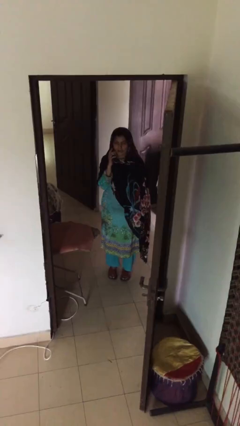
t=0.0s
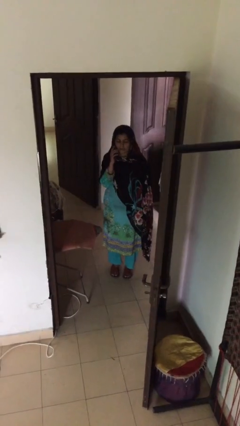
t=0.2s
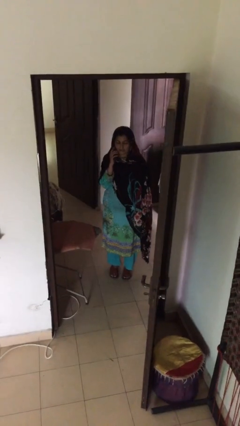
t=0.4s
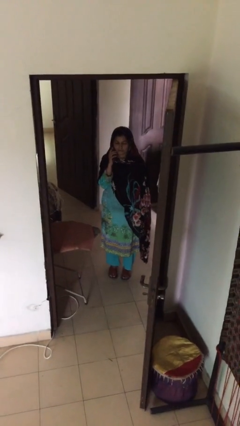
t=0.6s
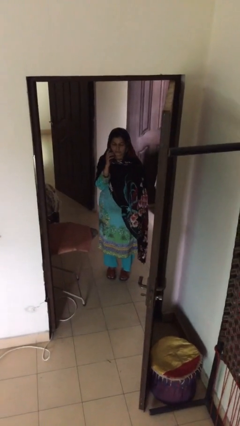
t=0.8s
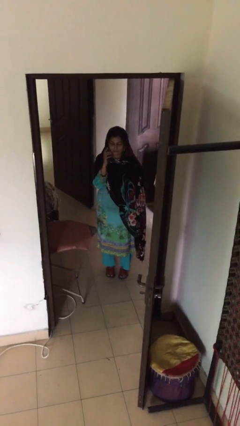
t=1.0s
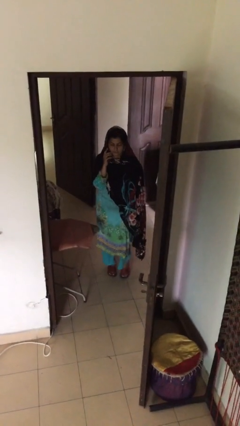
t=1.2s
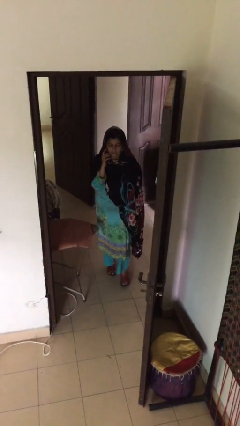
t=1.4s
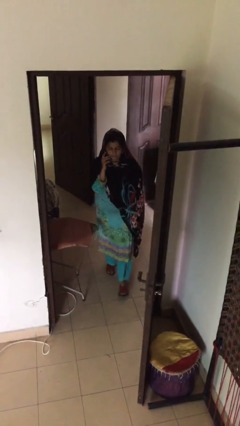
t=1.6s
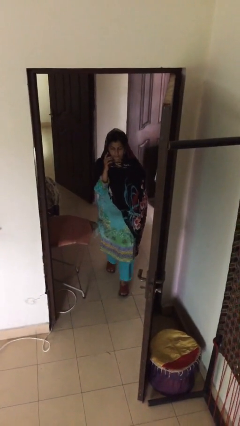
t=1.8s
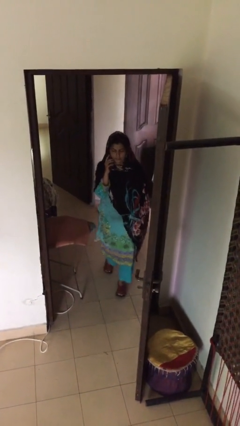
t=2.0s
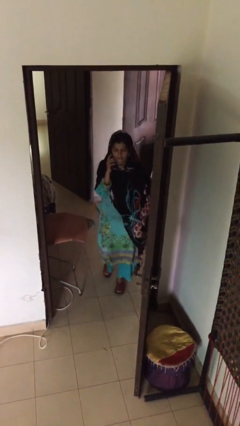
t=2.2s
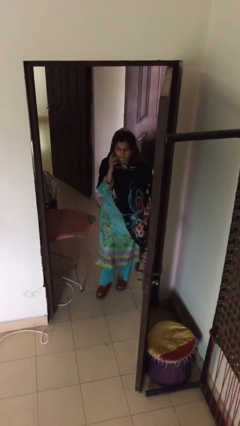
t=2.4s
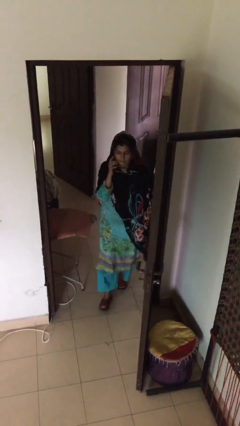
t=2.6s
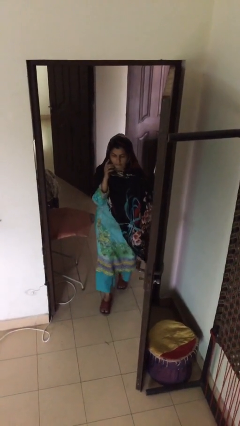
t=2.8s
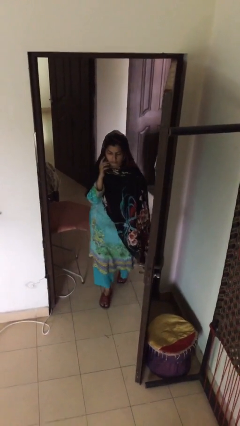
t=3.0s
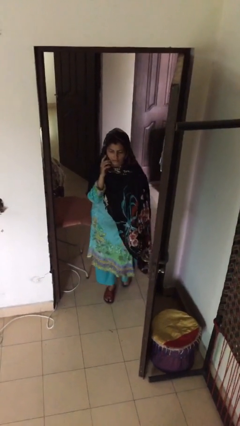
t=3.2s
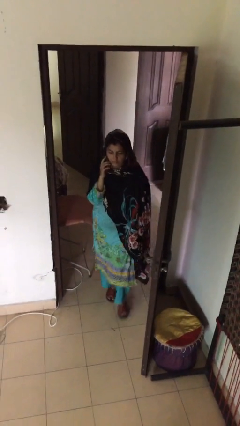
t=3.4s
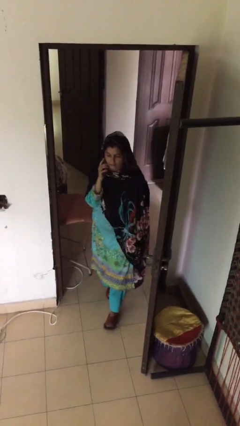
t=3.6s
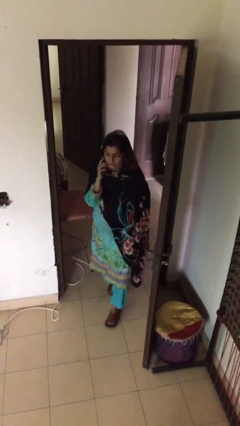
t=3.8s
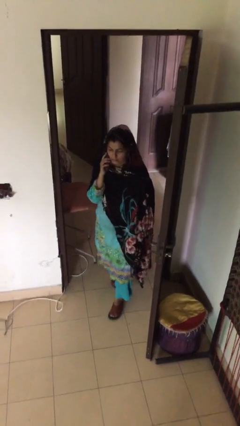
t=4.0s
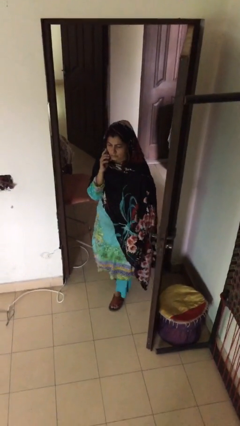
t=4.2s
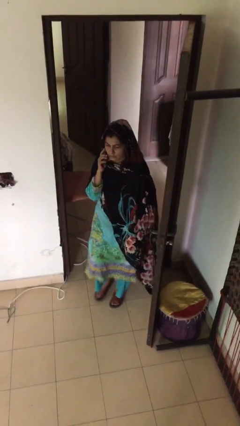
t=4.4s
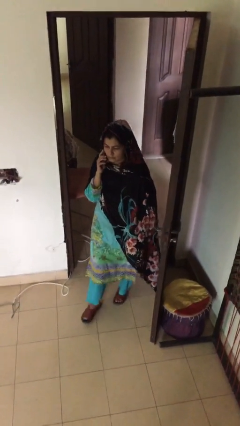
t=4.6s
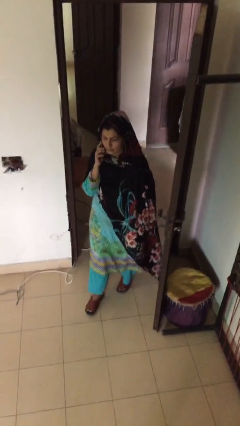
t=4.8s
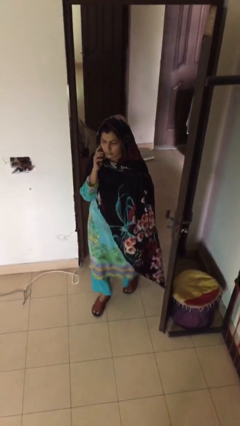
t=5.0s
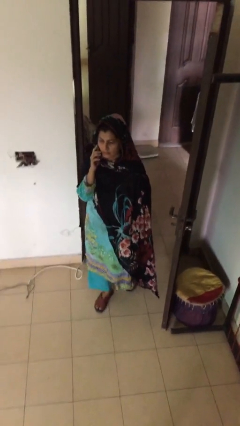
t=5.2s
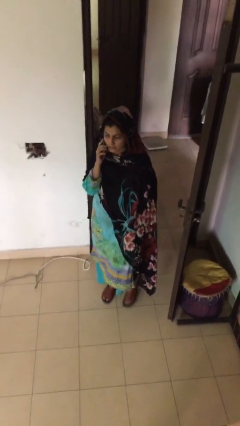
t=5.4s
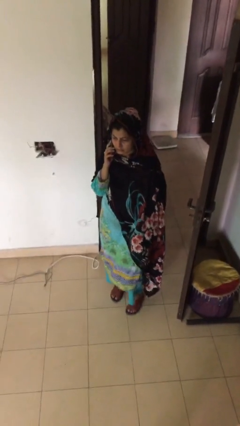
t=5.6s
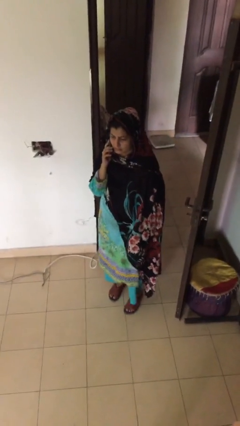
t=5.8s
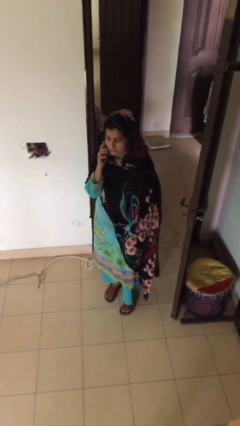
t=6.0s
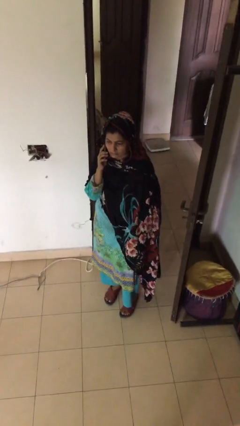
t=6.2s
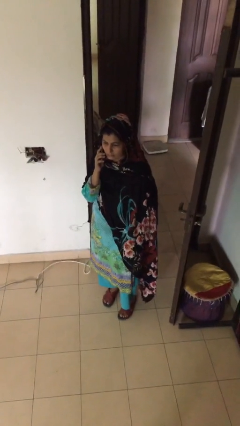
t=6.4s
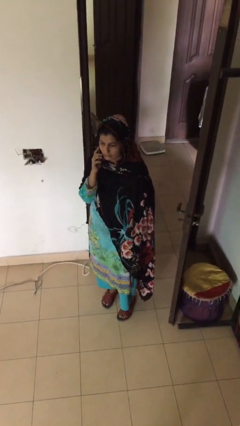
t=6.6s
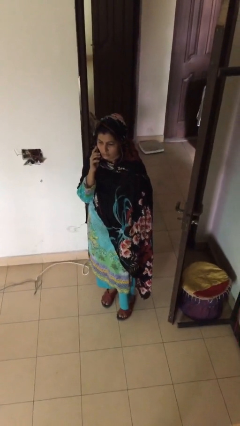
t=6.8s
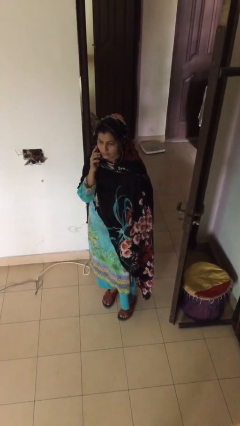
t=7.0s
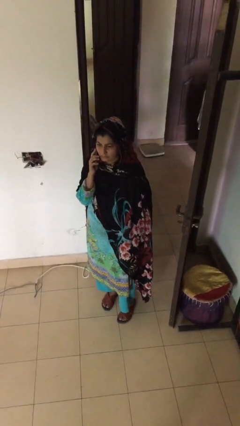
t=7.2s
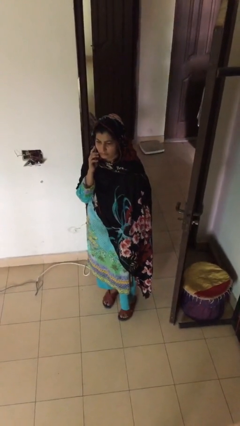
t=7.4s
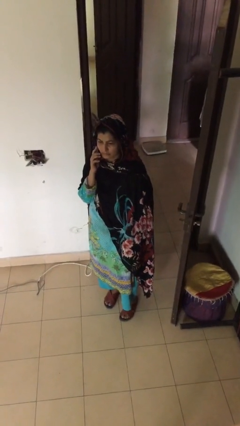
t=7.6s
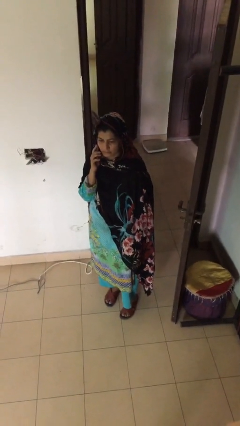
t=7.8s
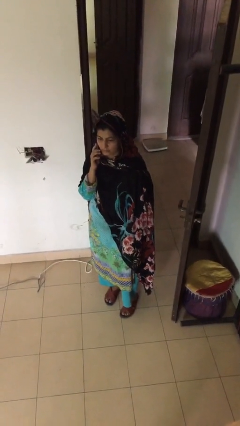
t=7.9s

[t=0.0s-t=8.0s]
person enters scene through structure

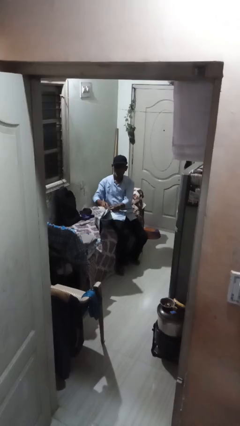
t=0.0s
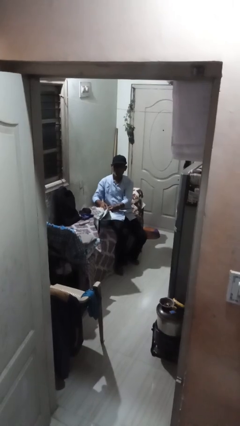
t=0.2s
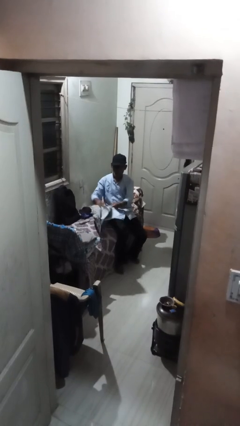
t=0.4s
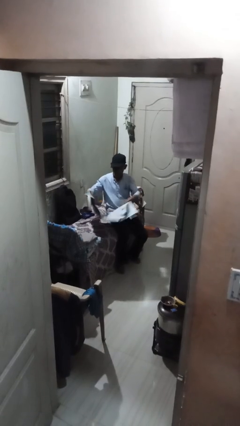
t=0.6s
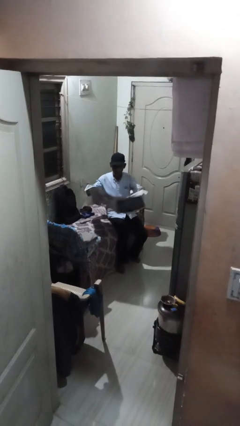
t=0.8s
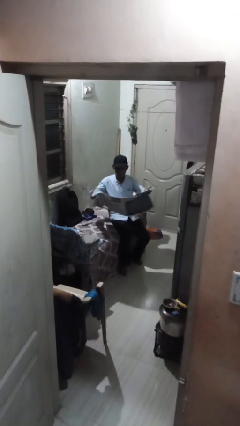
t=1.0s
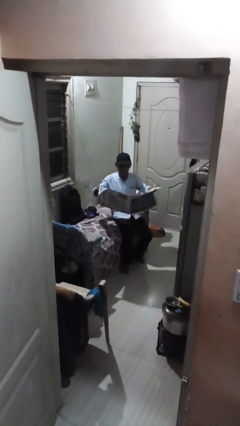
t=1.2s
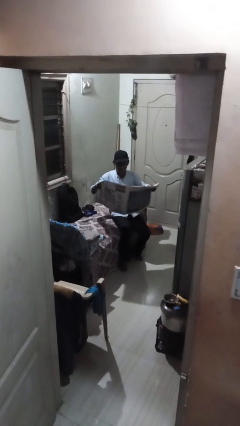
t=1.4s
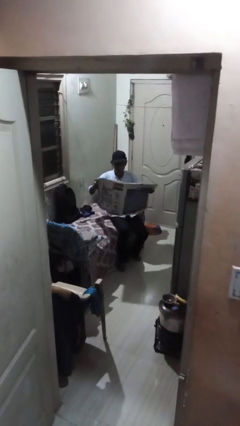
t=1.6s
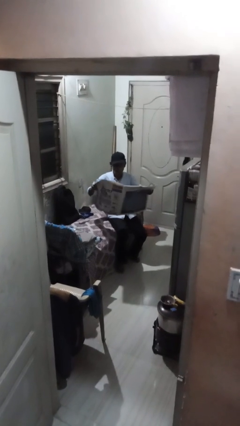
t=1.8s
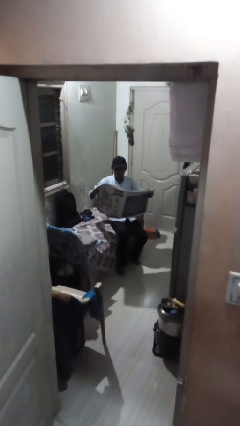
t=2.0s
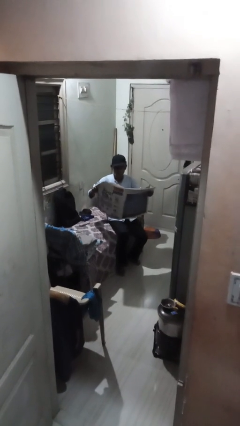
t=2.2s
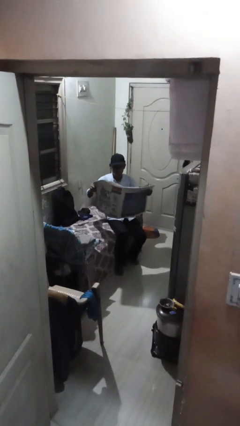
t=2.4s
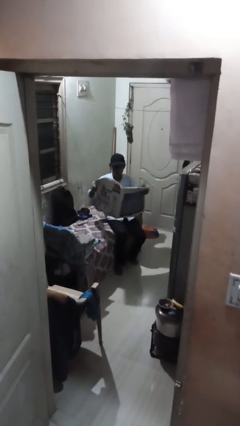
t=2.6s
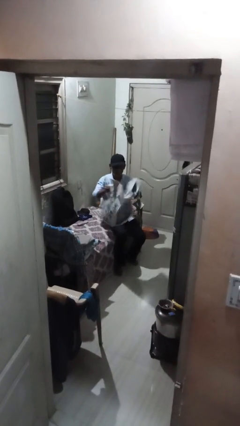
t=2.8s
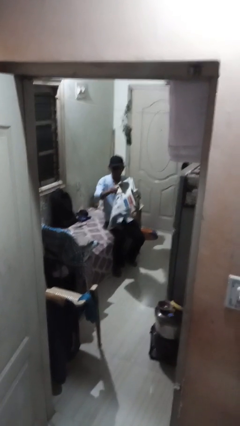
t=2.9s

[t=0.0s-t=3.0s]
person reads newspaper

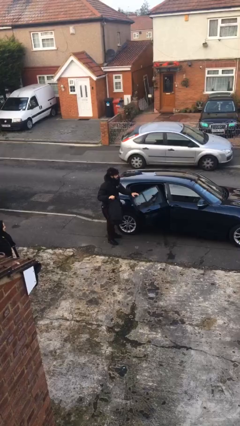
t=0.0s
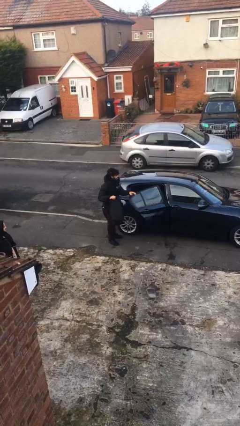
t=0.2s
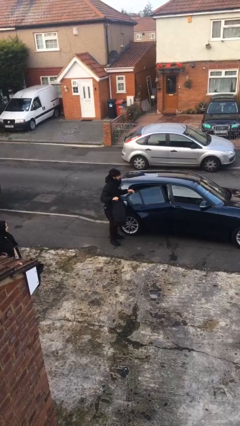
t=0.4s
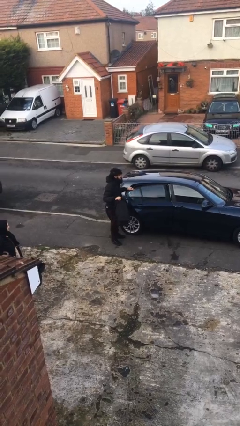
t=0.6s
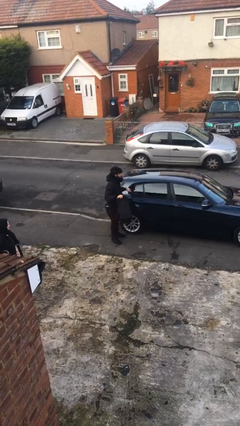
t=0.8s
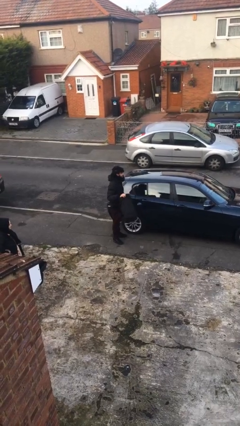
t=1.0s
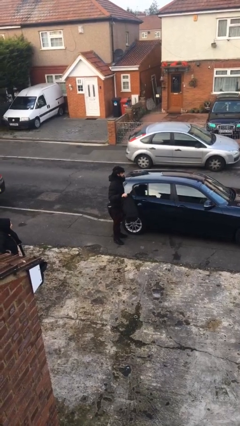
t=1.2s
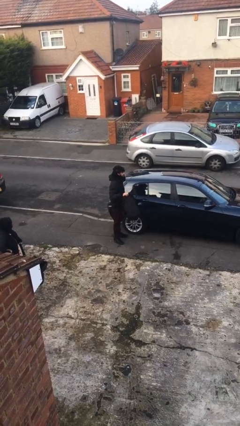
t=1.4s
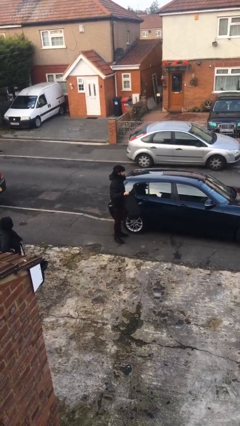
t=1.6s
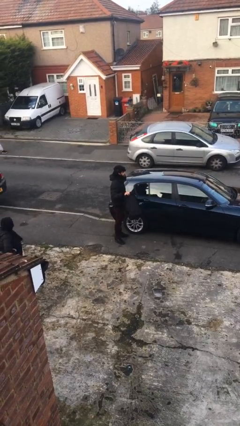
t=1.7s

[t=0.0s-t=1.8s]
person closes car door

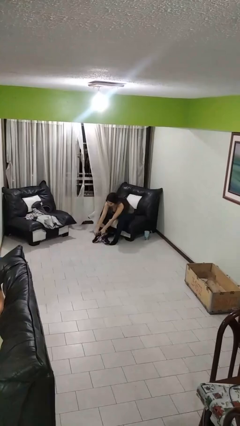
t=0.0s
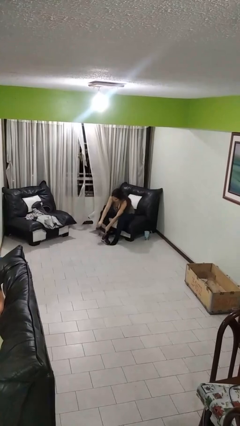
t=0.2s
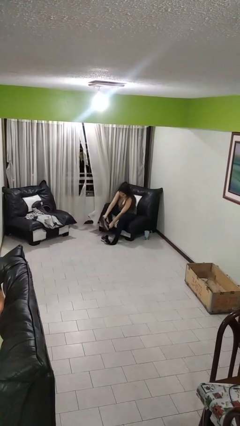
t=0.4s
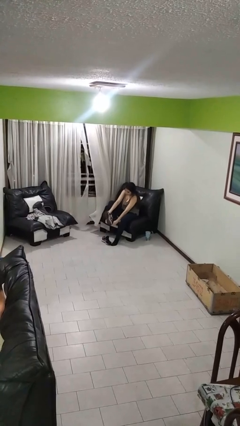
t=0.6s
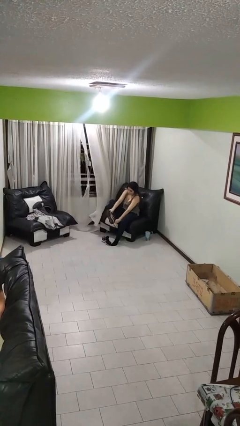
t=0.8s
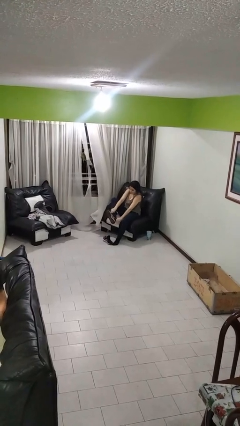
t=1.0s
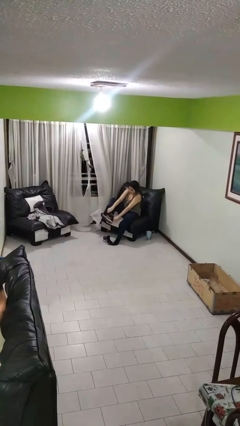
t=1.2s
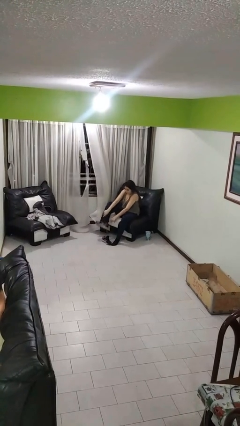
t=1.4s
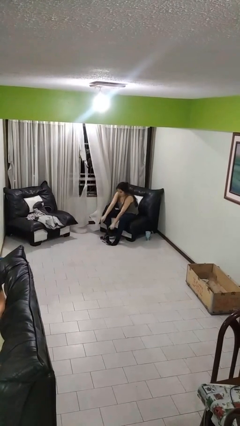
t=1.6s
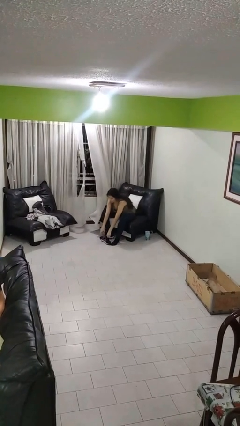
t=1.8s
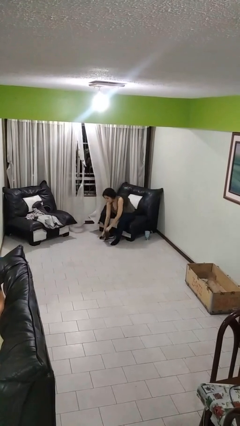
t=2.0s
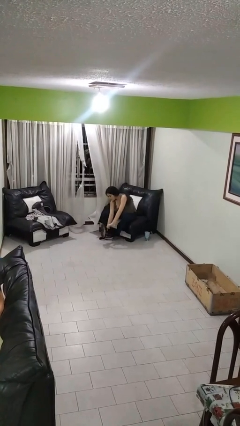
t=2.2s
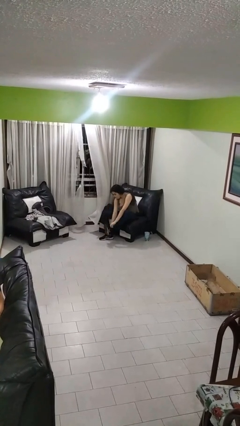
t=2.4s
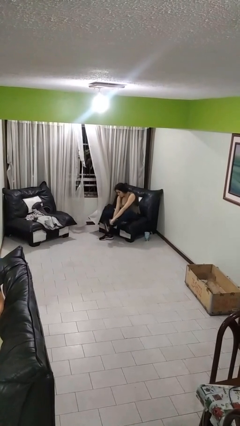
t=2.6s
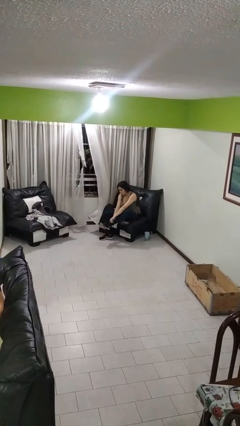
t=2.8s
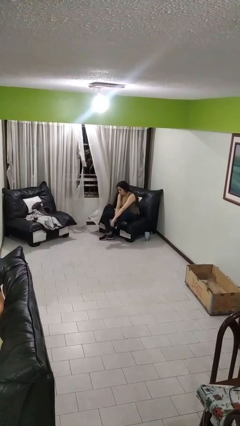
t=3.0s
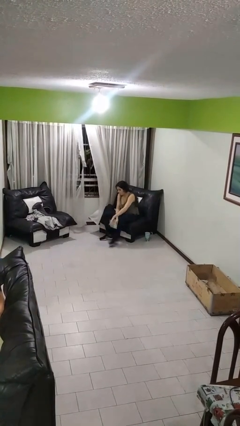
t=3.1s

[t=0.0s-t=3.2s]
person puts on shoes

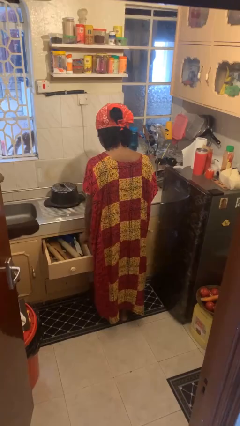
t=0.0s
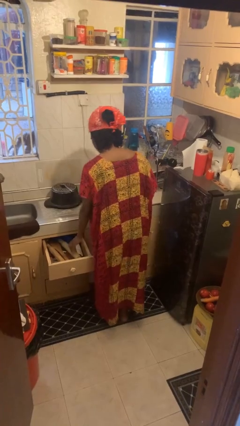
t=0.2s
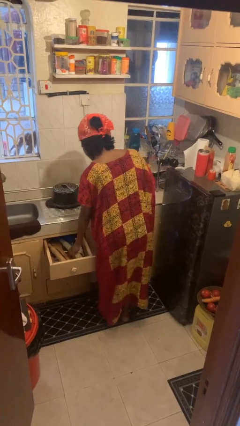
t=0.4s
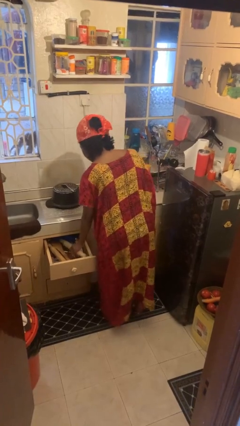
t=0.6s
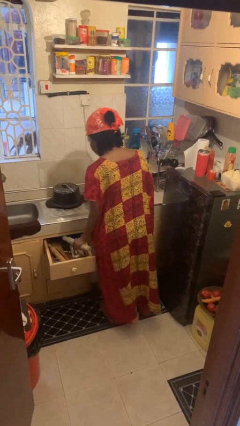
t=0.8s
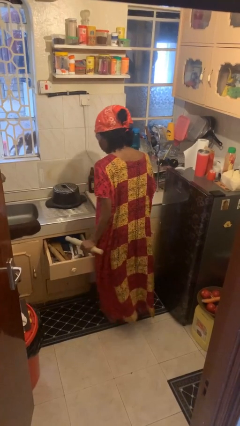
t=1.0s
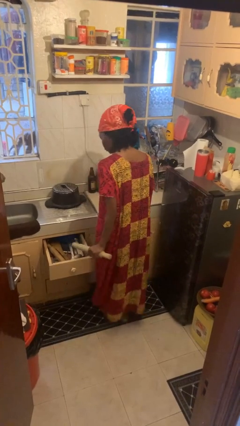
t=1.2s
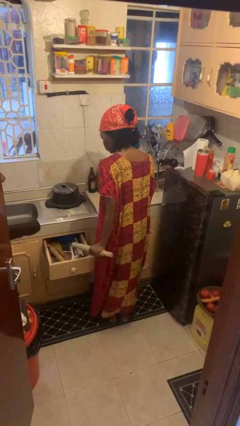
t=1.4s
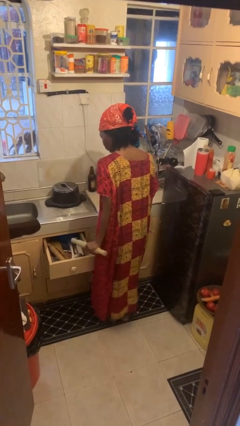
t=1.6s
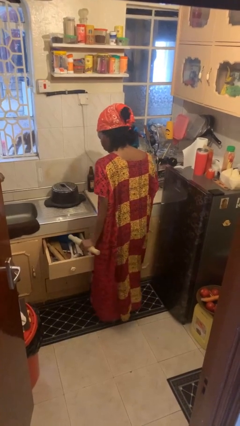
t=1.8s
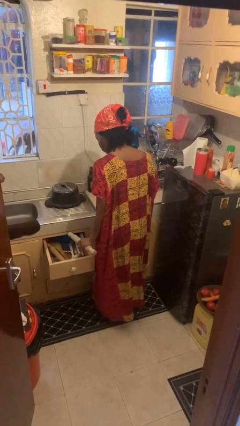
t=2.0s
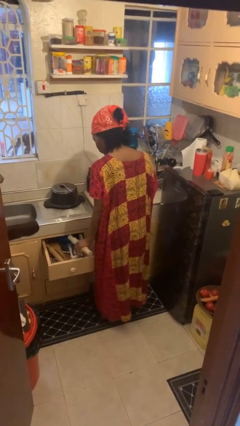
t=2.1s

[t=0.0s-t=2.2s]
person takes object from kitchen drawer
